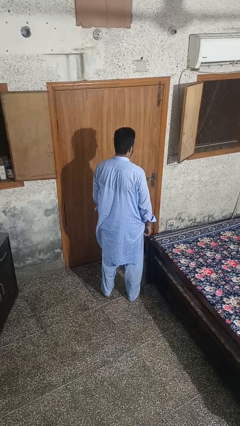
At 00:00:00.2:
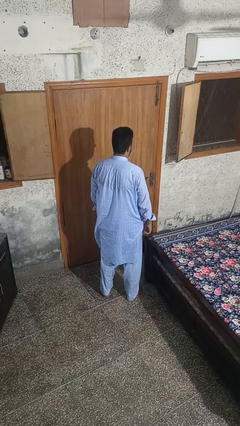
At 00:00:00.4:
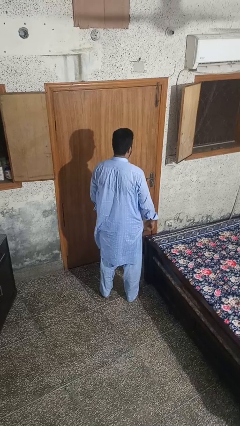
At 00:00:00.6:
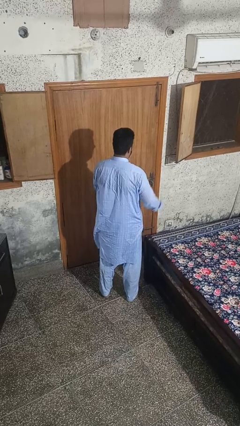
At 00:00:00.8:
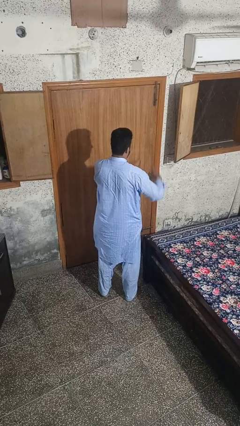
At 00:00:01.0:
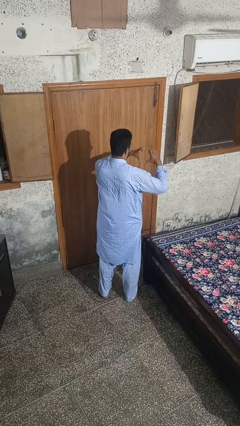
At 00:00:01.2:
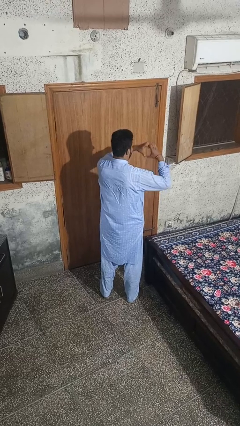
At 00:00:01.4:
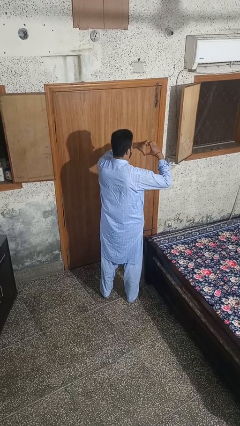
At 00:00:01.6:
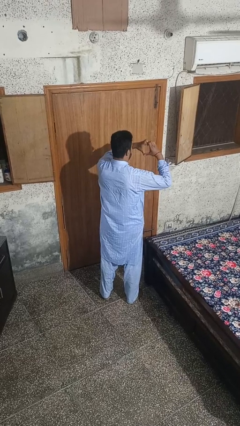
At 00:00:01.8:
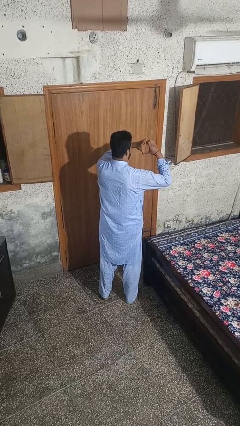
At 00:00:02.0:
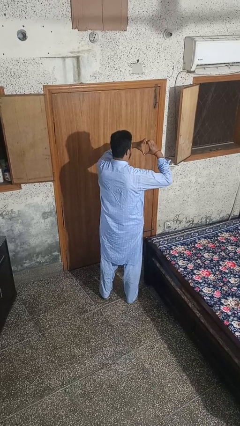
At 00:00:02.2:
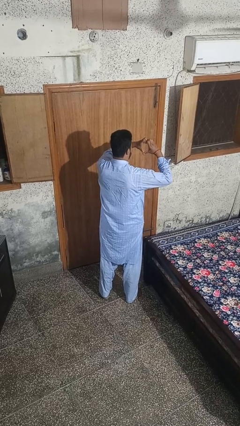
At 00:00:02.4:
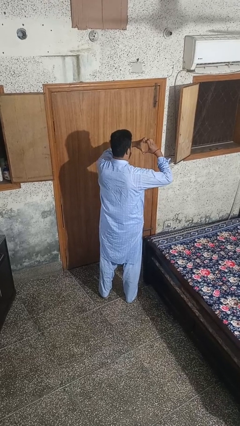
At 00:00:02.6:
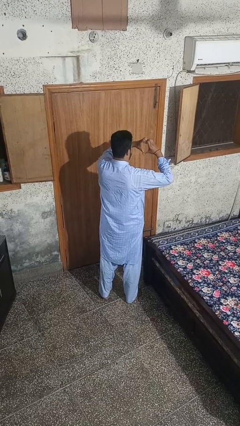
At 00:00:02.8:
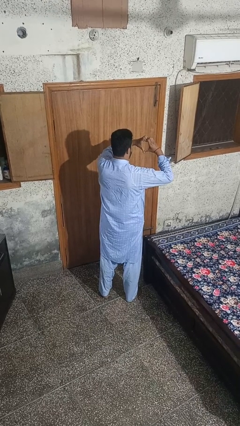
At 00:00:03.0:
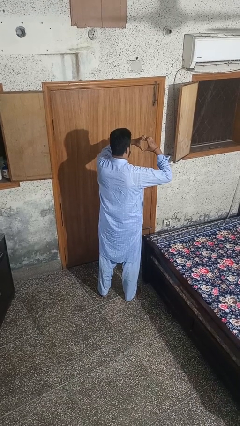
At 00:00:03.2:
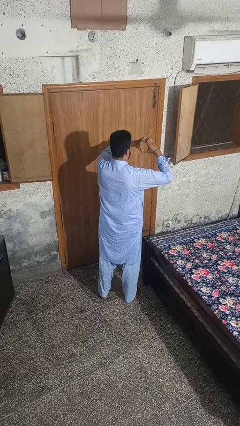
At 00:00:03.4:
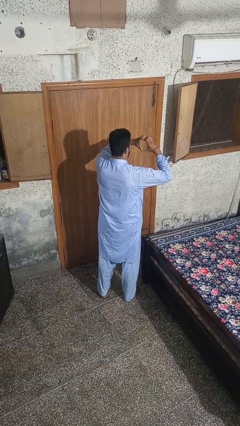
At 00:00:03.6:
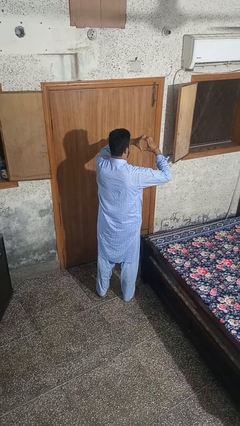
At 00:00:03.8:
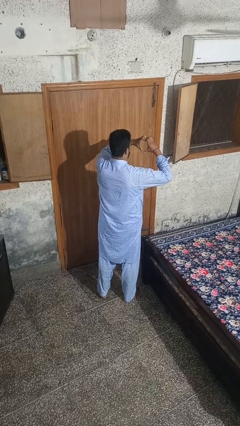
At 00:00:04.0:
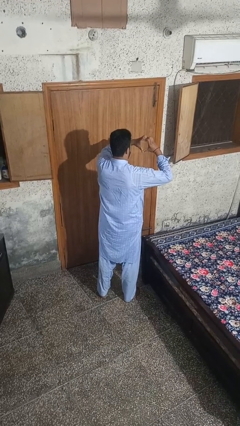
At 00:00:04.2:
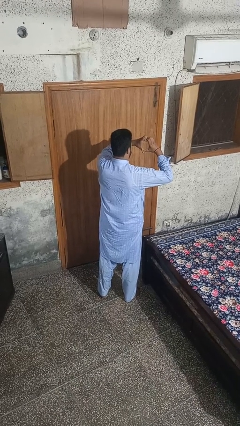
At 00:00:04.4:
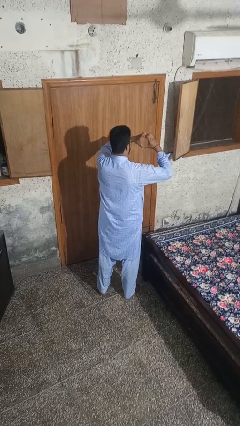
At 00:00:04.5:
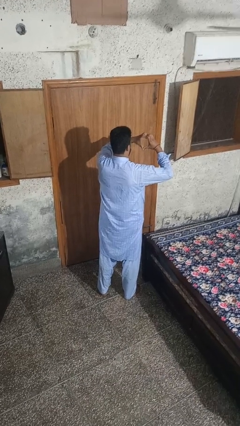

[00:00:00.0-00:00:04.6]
person gestures heart

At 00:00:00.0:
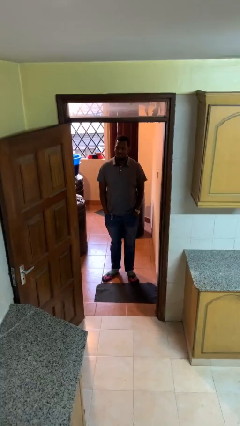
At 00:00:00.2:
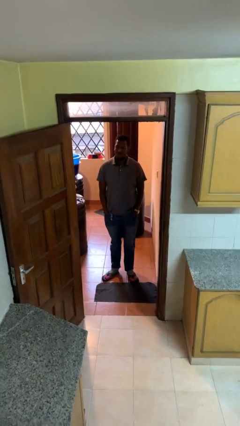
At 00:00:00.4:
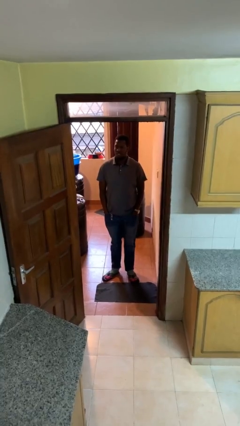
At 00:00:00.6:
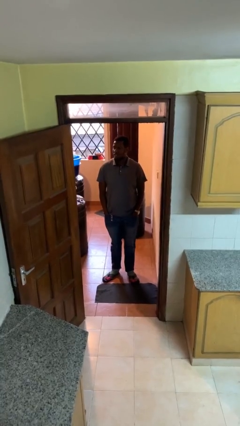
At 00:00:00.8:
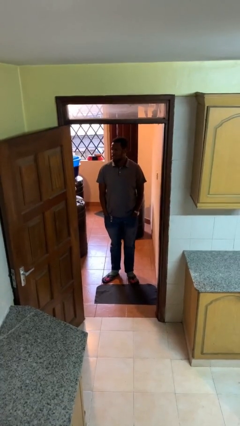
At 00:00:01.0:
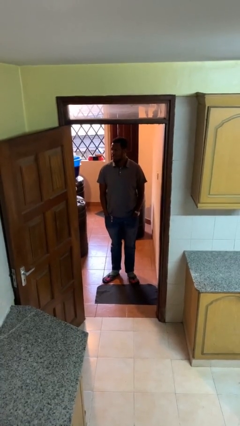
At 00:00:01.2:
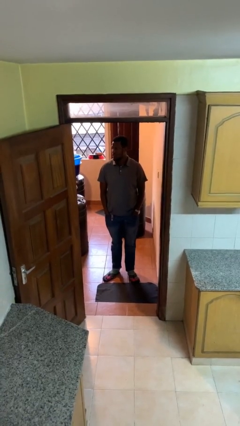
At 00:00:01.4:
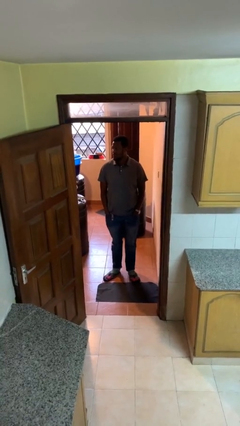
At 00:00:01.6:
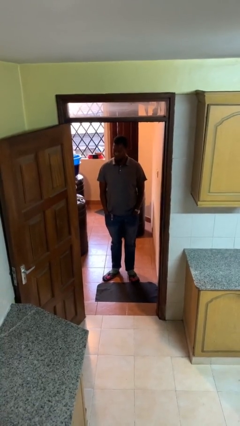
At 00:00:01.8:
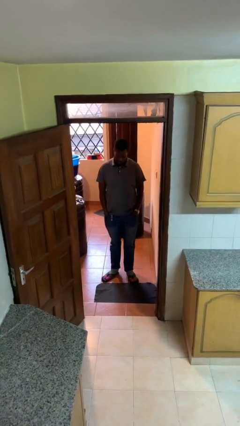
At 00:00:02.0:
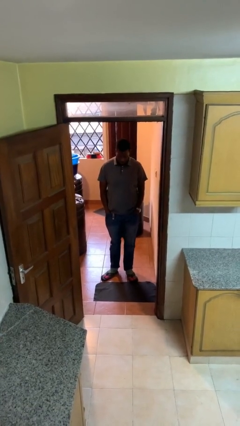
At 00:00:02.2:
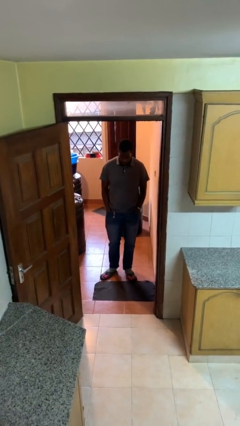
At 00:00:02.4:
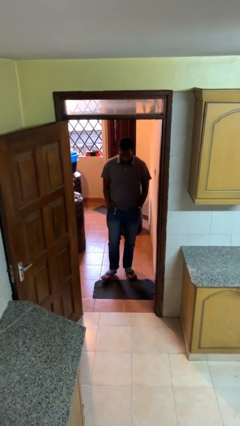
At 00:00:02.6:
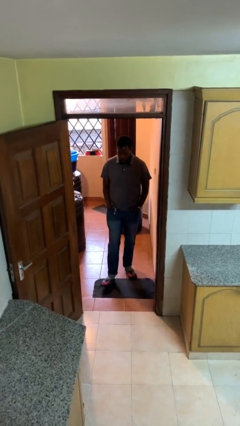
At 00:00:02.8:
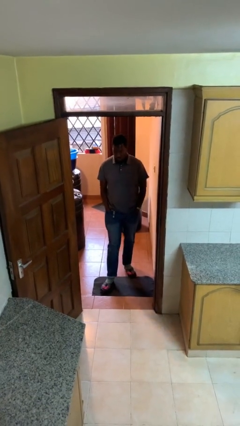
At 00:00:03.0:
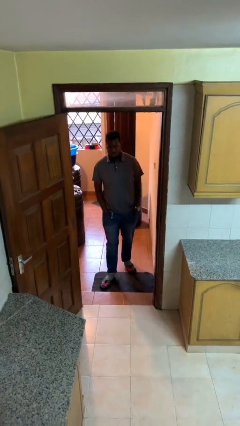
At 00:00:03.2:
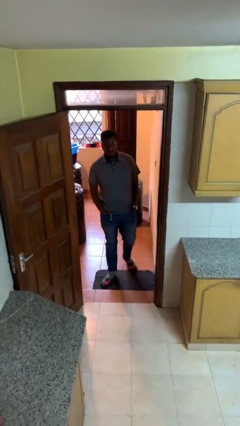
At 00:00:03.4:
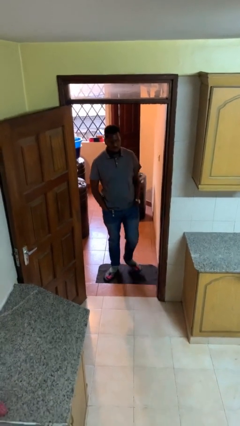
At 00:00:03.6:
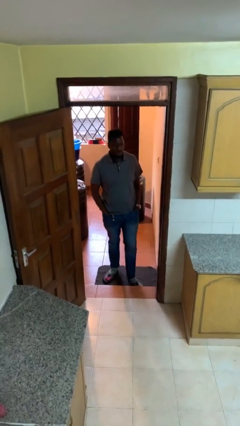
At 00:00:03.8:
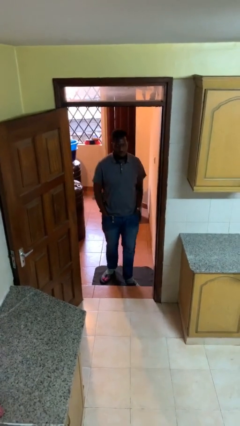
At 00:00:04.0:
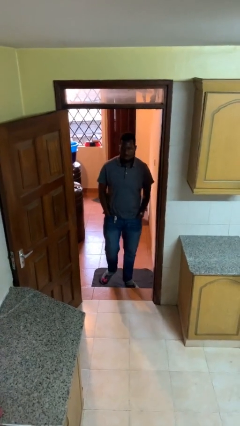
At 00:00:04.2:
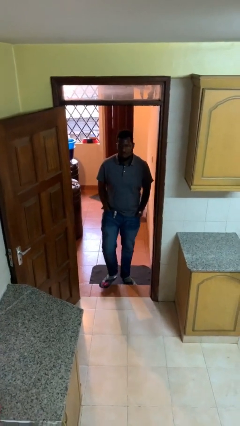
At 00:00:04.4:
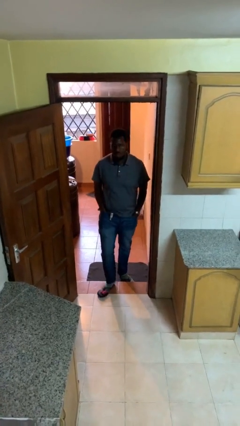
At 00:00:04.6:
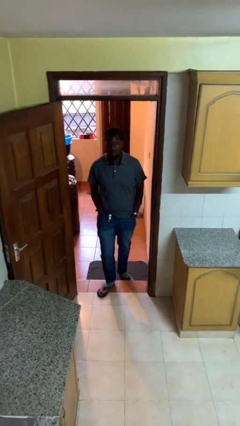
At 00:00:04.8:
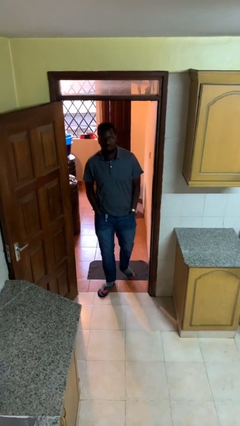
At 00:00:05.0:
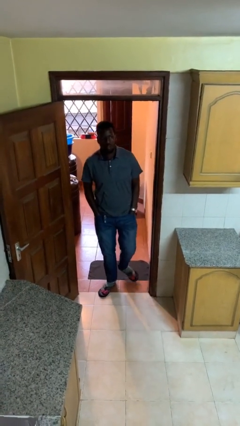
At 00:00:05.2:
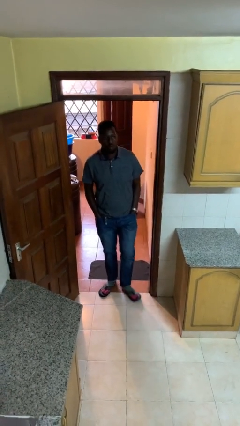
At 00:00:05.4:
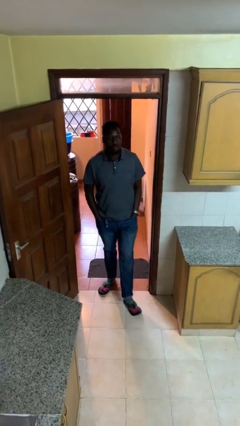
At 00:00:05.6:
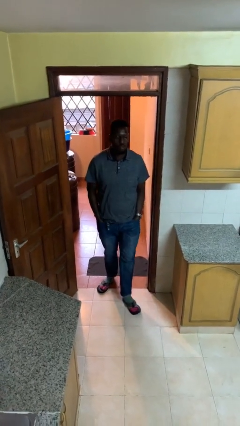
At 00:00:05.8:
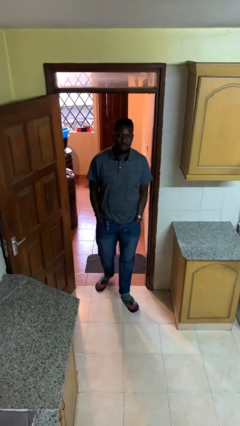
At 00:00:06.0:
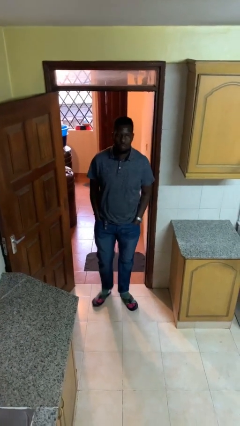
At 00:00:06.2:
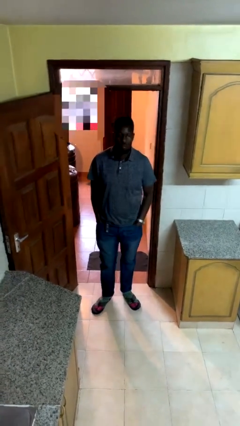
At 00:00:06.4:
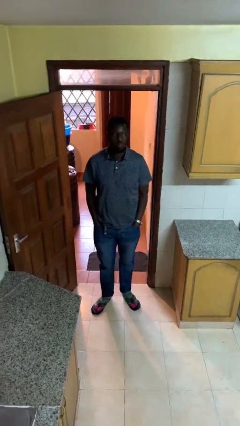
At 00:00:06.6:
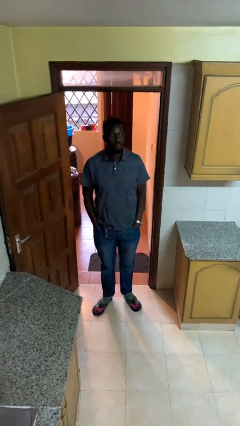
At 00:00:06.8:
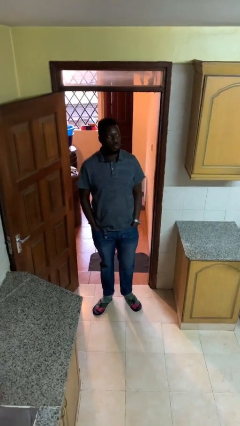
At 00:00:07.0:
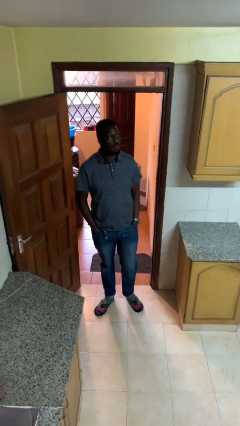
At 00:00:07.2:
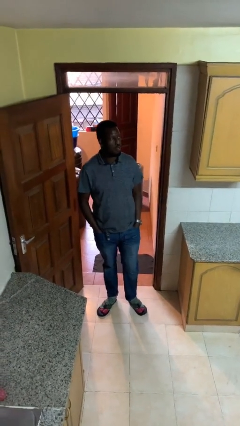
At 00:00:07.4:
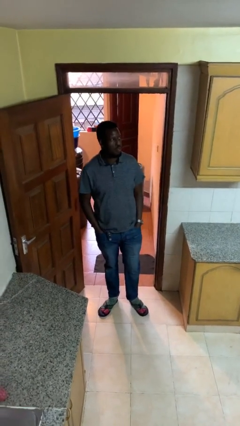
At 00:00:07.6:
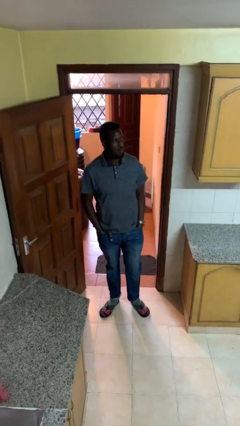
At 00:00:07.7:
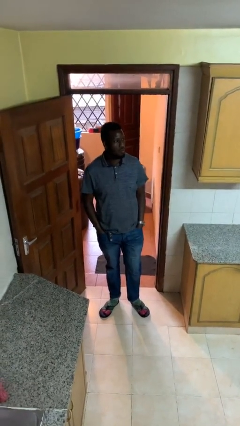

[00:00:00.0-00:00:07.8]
person enters scene through structure

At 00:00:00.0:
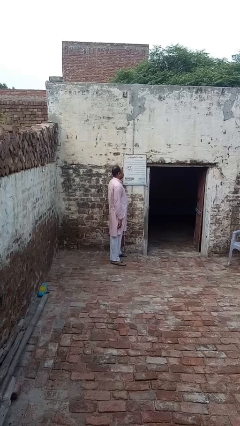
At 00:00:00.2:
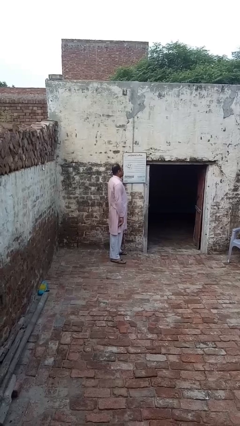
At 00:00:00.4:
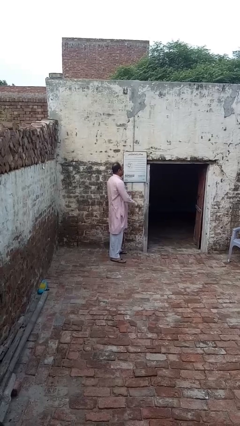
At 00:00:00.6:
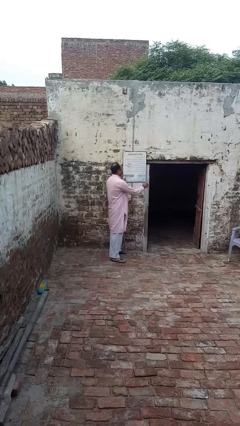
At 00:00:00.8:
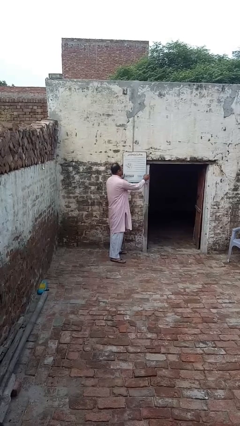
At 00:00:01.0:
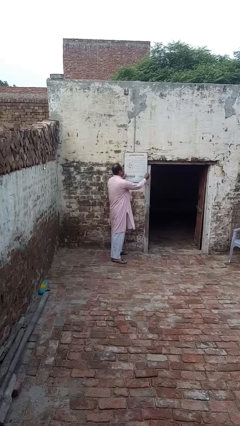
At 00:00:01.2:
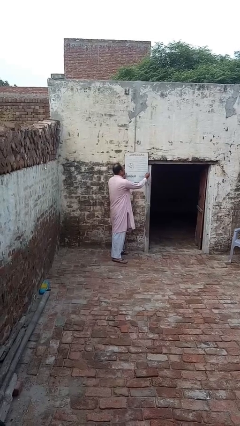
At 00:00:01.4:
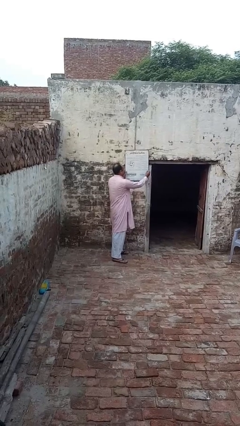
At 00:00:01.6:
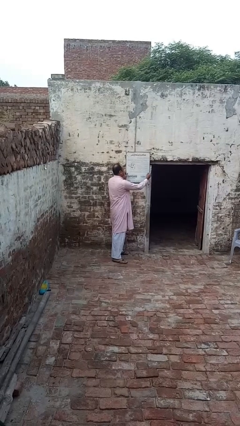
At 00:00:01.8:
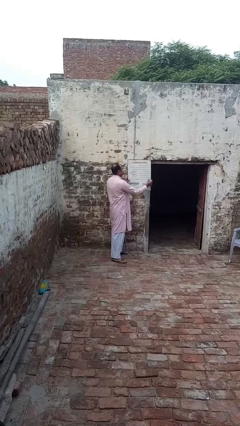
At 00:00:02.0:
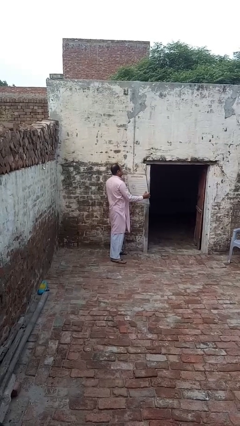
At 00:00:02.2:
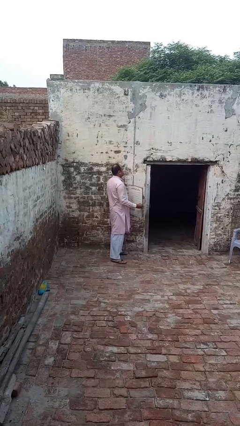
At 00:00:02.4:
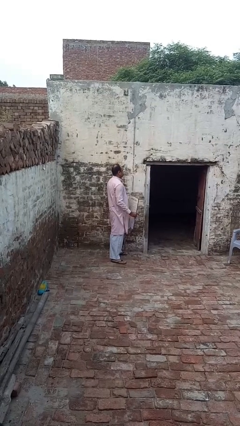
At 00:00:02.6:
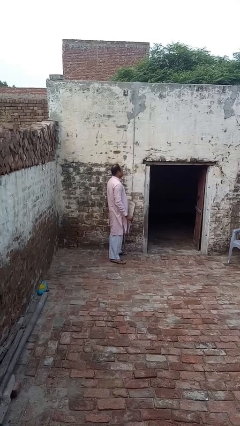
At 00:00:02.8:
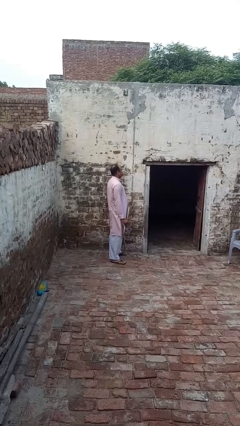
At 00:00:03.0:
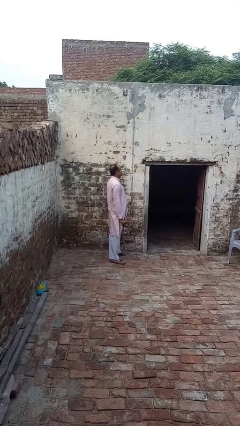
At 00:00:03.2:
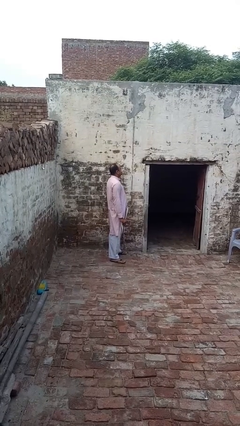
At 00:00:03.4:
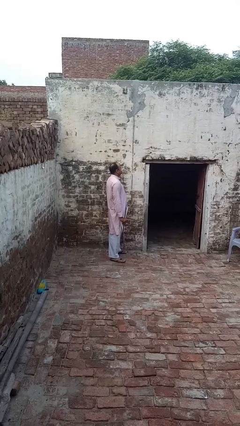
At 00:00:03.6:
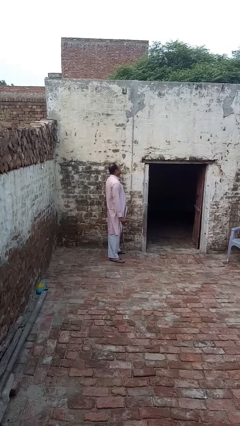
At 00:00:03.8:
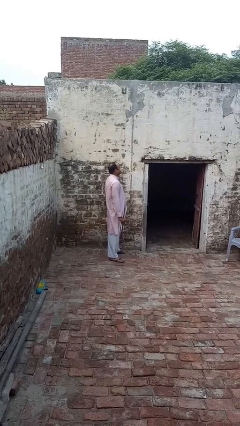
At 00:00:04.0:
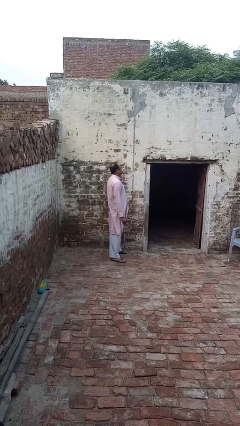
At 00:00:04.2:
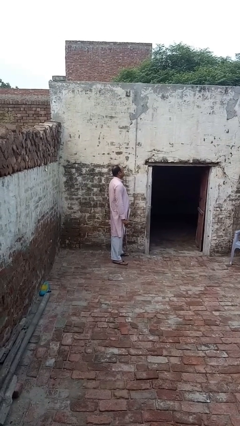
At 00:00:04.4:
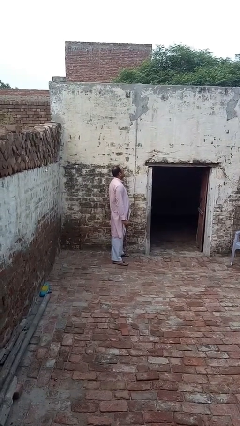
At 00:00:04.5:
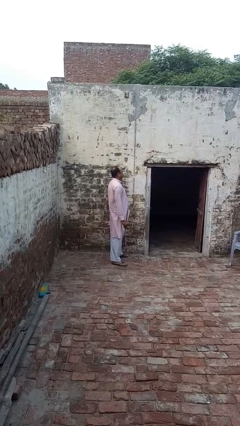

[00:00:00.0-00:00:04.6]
person takes down picture frame

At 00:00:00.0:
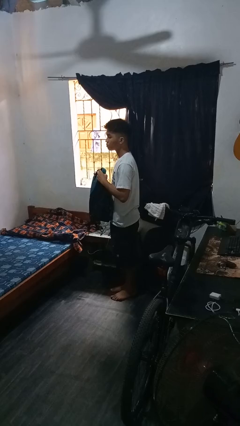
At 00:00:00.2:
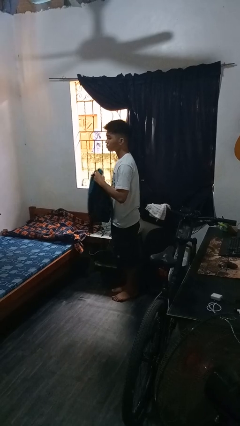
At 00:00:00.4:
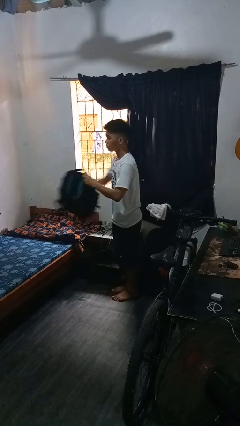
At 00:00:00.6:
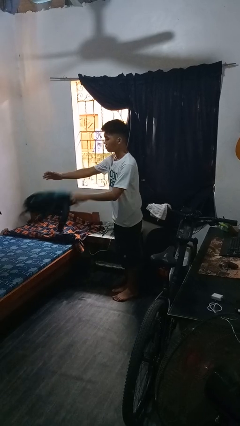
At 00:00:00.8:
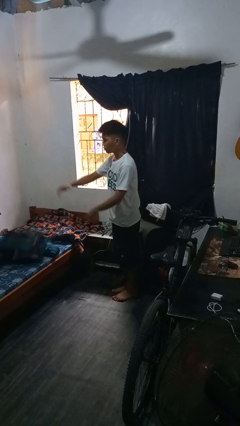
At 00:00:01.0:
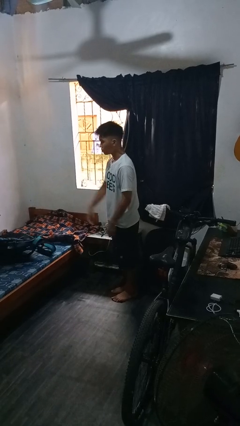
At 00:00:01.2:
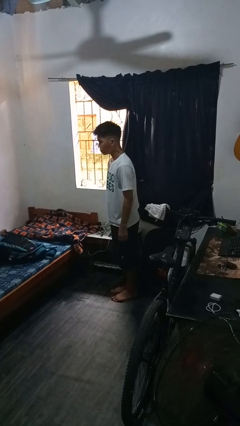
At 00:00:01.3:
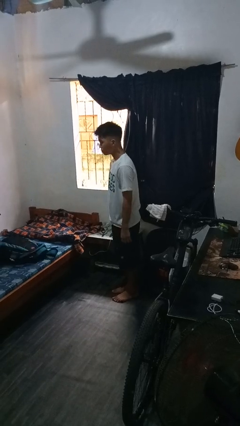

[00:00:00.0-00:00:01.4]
person throws object on bed
